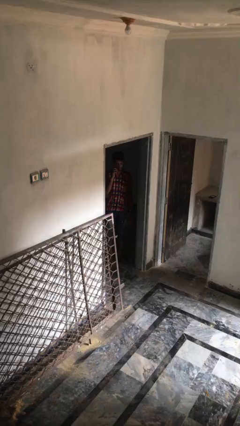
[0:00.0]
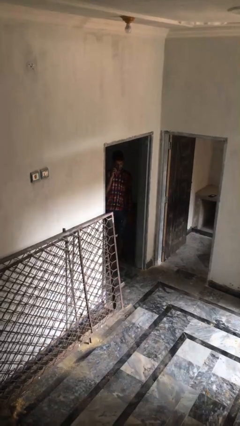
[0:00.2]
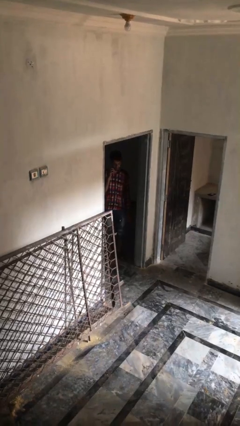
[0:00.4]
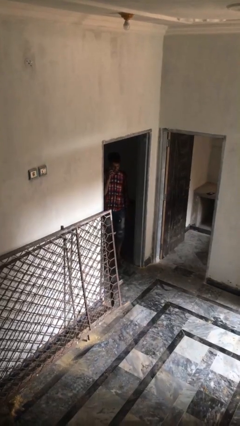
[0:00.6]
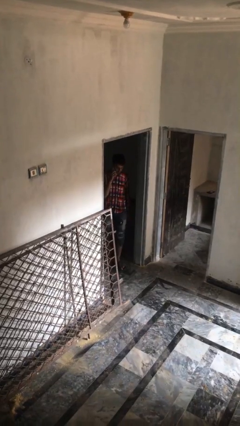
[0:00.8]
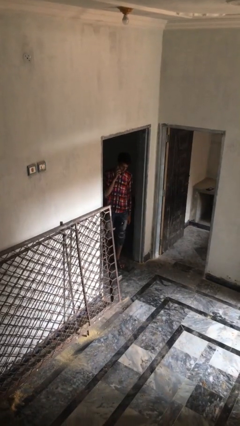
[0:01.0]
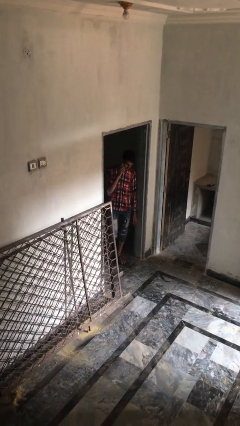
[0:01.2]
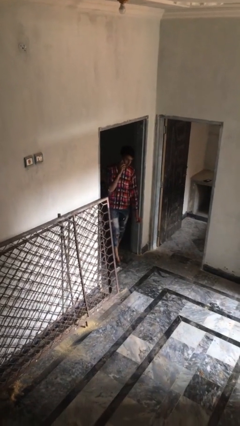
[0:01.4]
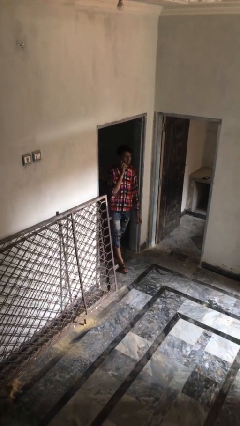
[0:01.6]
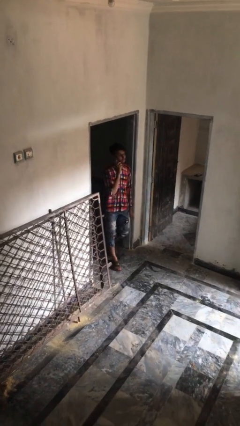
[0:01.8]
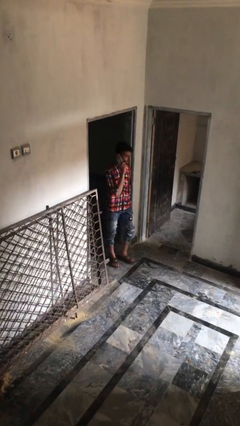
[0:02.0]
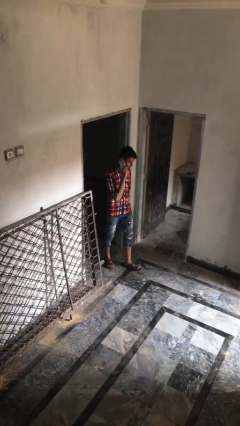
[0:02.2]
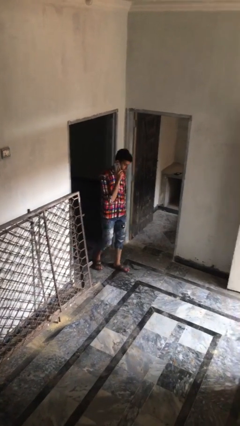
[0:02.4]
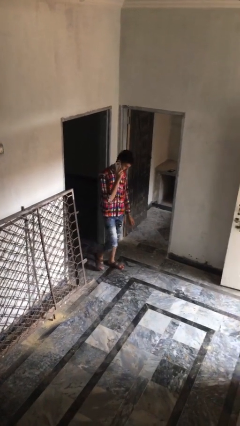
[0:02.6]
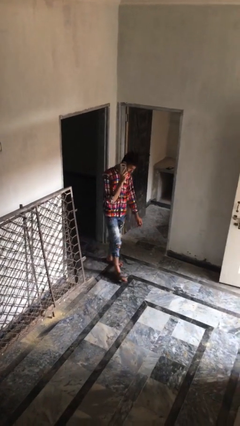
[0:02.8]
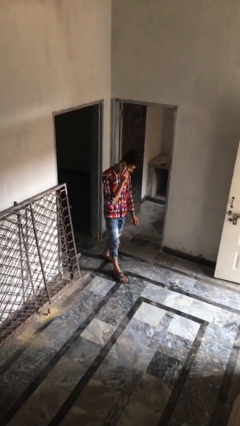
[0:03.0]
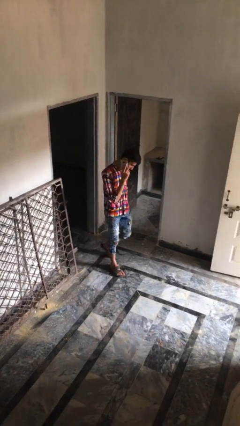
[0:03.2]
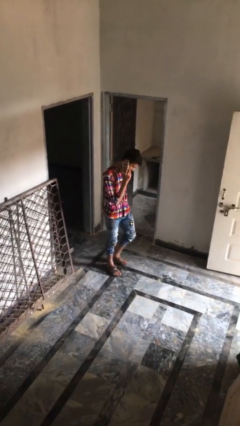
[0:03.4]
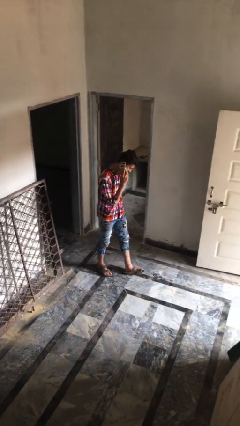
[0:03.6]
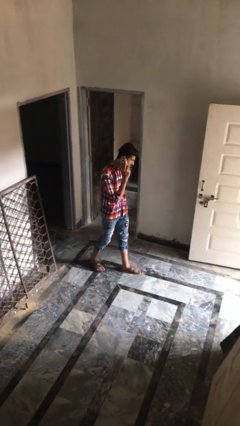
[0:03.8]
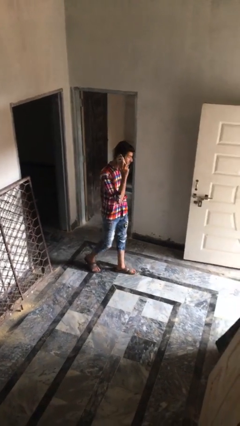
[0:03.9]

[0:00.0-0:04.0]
person enters scene through structure

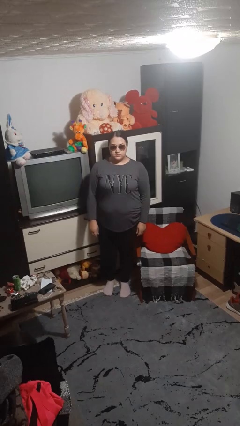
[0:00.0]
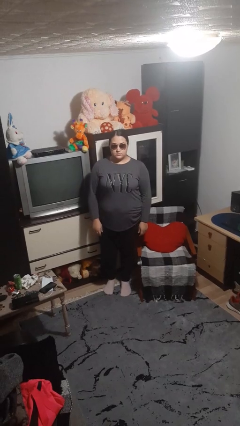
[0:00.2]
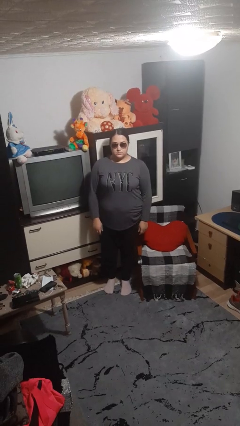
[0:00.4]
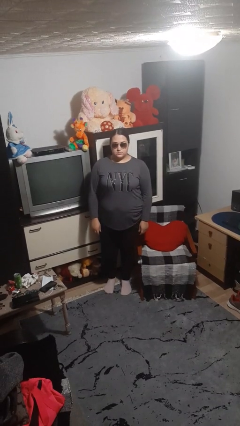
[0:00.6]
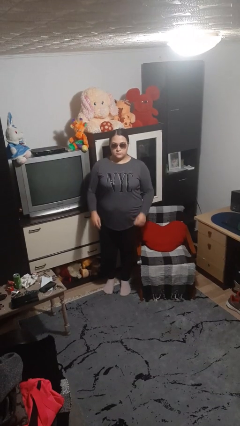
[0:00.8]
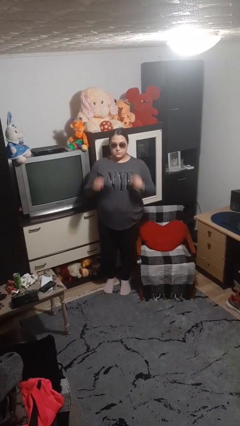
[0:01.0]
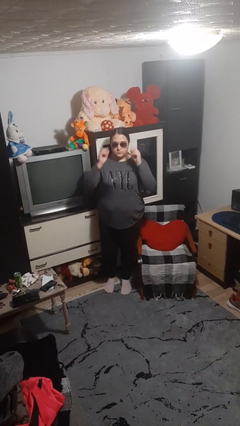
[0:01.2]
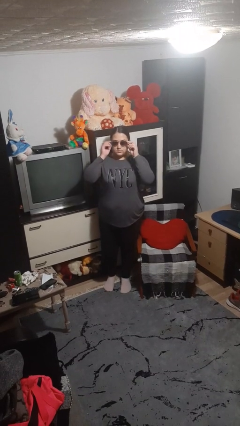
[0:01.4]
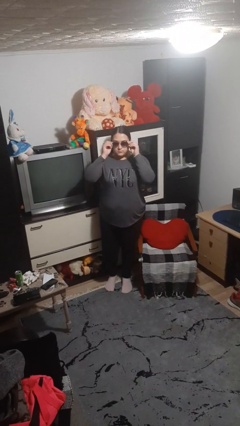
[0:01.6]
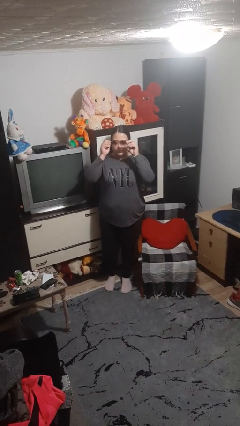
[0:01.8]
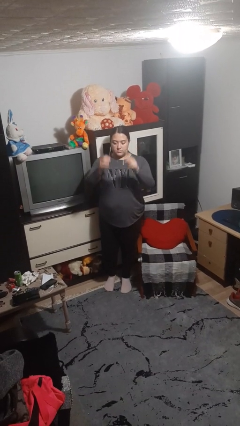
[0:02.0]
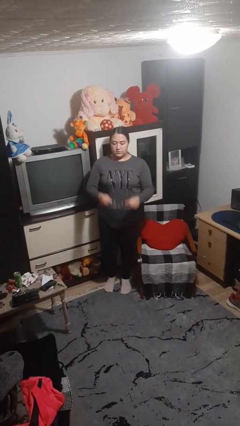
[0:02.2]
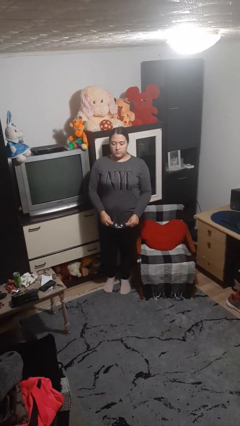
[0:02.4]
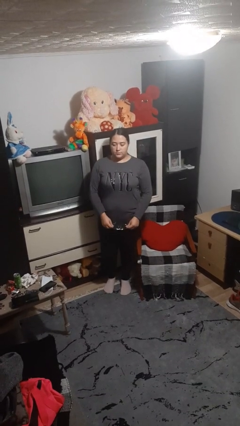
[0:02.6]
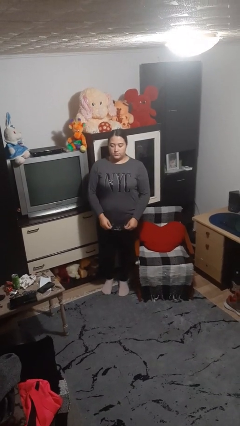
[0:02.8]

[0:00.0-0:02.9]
person takes off sunglasses

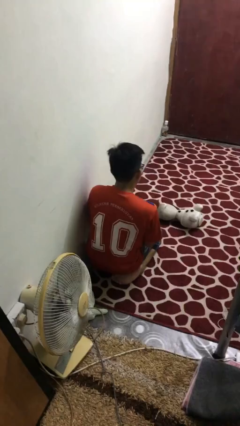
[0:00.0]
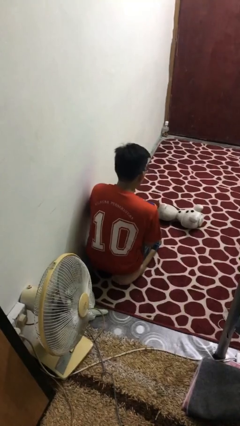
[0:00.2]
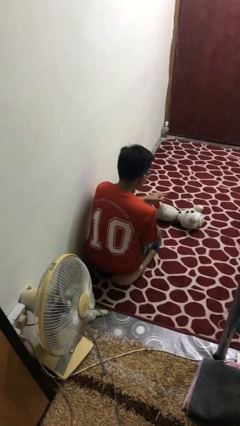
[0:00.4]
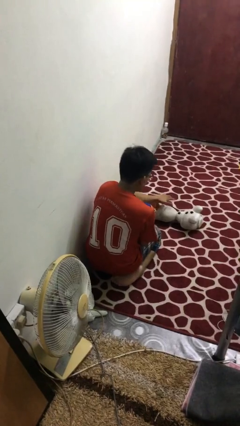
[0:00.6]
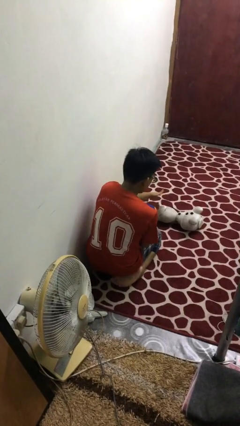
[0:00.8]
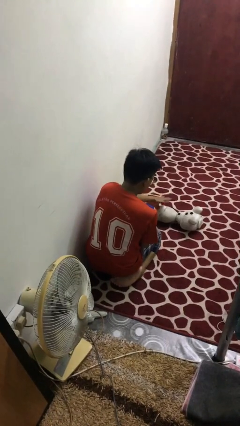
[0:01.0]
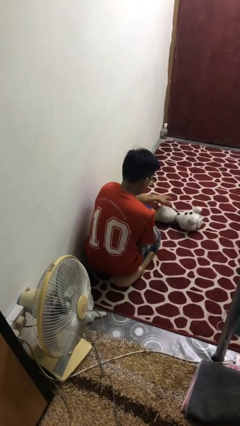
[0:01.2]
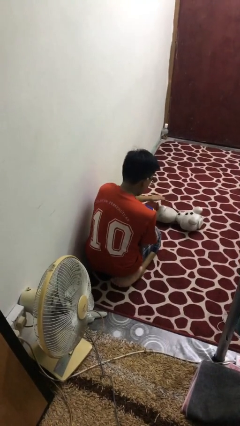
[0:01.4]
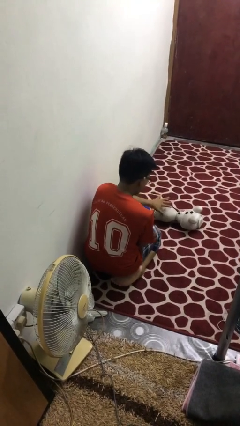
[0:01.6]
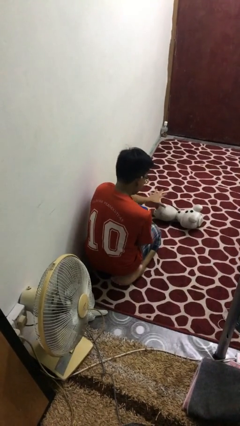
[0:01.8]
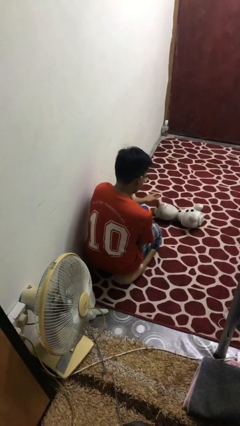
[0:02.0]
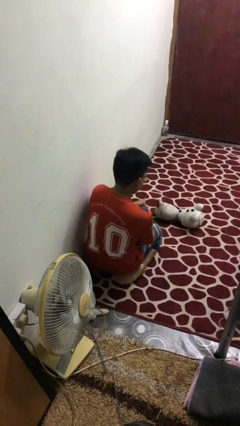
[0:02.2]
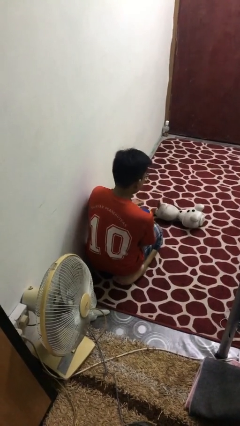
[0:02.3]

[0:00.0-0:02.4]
person waves hand over object

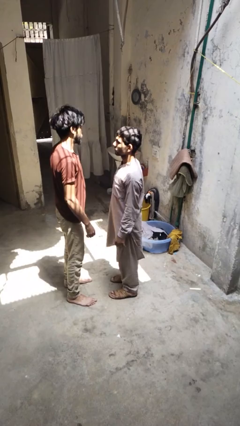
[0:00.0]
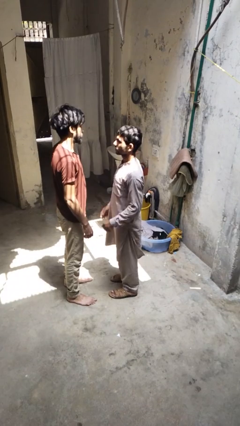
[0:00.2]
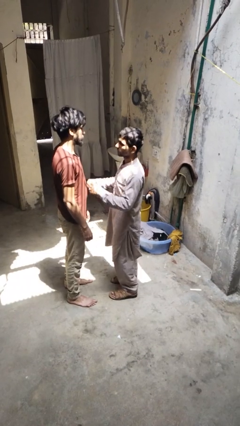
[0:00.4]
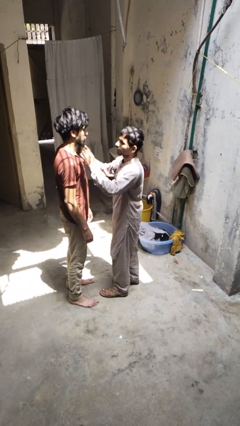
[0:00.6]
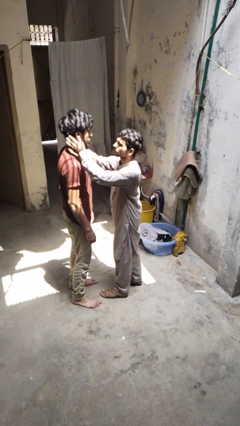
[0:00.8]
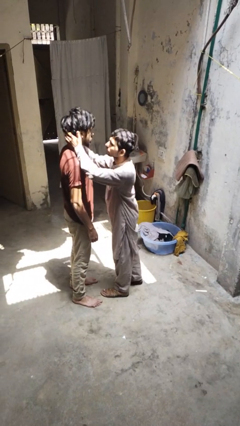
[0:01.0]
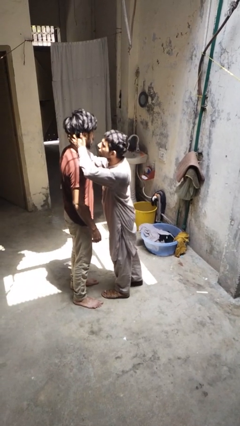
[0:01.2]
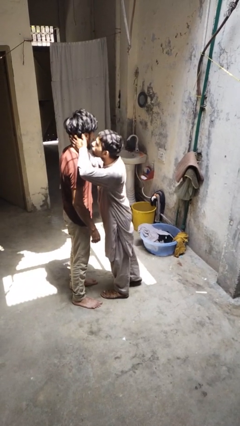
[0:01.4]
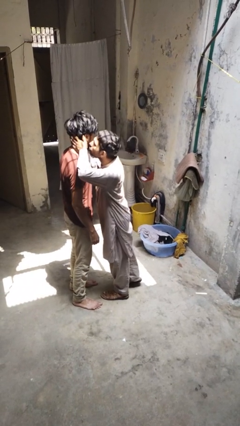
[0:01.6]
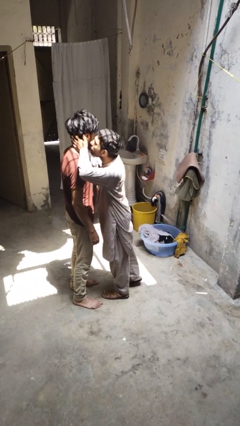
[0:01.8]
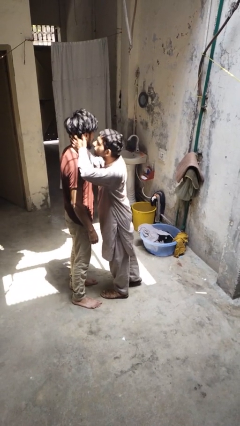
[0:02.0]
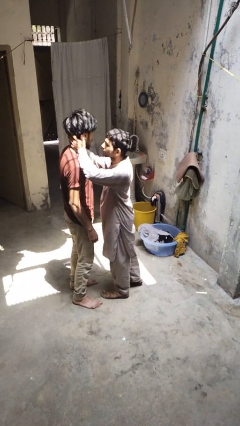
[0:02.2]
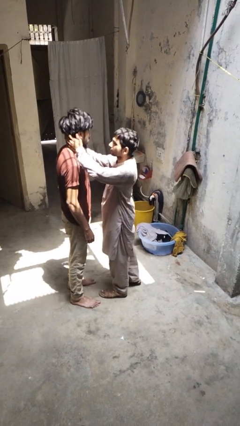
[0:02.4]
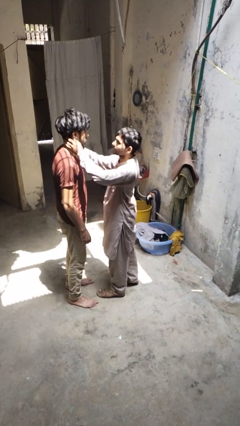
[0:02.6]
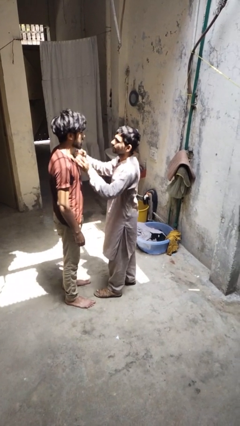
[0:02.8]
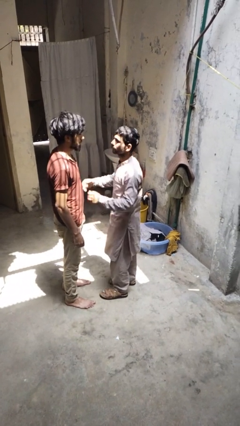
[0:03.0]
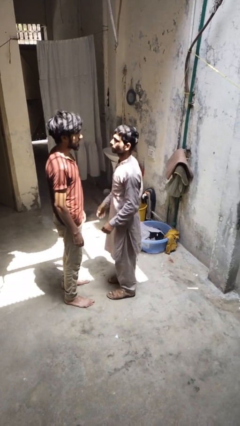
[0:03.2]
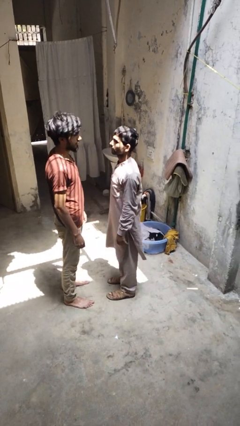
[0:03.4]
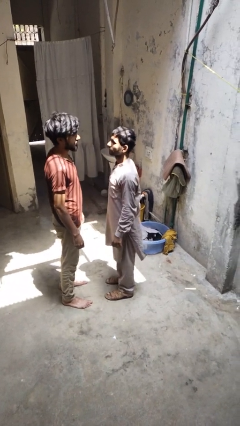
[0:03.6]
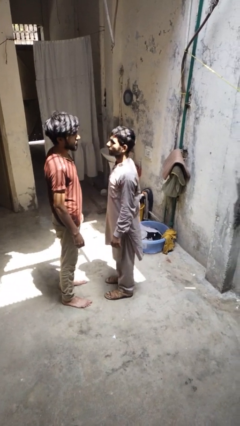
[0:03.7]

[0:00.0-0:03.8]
person kisses cheek of person

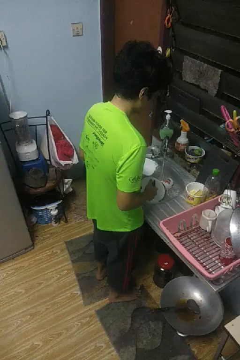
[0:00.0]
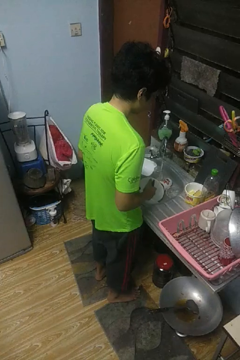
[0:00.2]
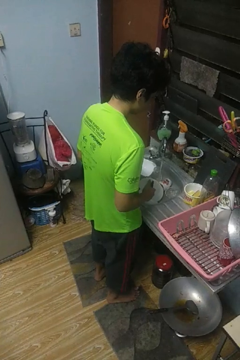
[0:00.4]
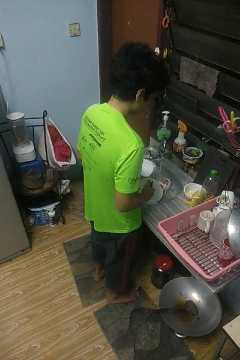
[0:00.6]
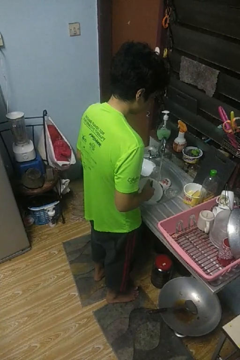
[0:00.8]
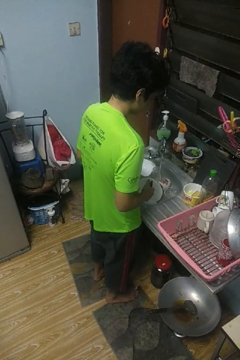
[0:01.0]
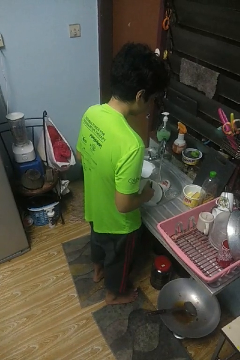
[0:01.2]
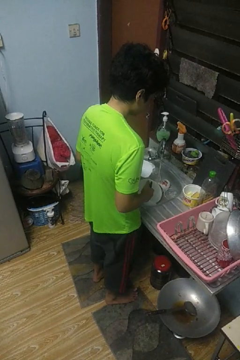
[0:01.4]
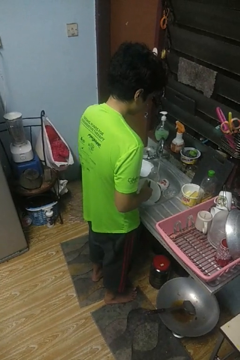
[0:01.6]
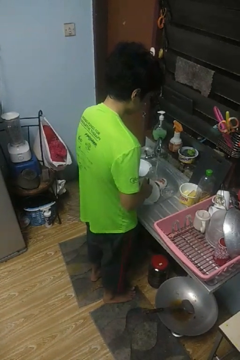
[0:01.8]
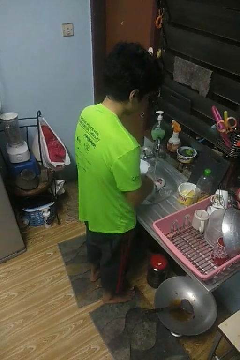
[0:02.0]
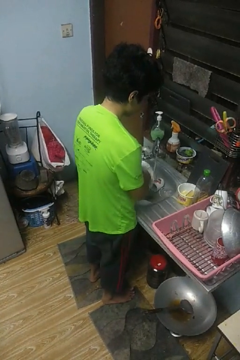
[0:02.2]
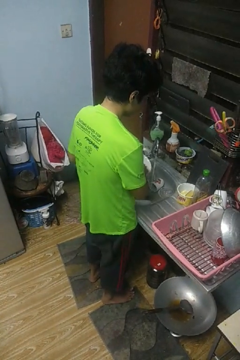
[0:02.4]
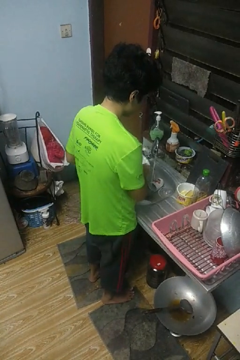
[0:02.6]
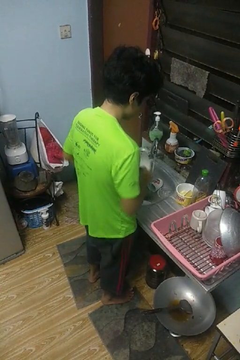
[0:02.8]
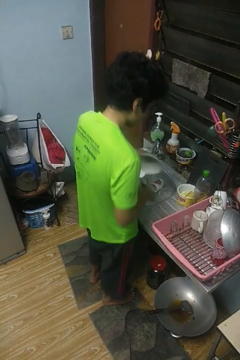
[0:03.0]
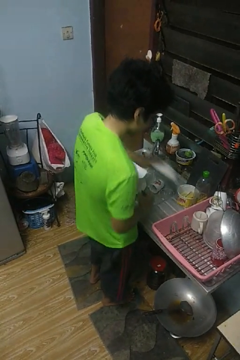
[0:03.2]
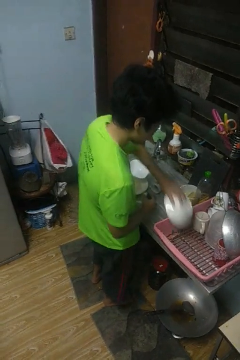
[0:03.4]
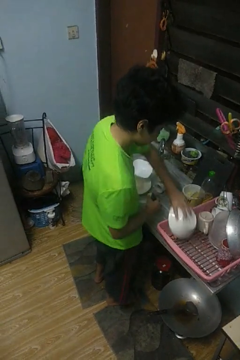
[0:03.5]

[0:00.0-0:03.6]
person washes dish

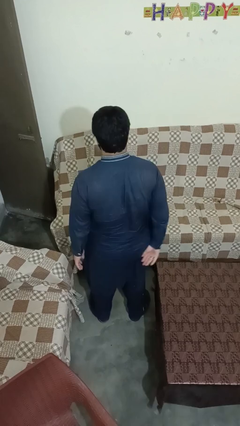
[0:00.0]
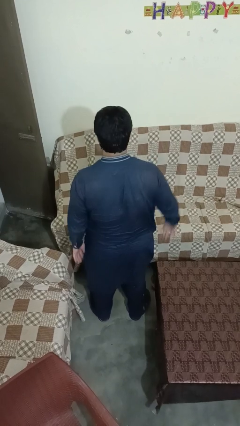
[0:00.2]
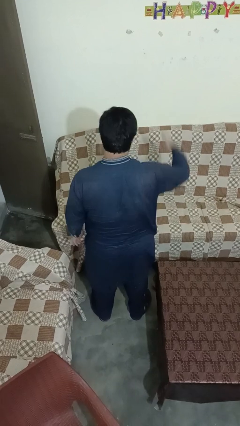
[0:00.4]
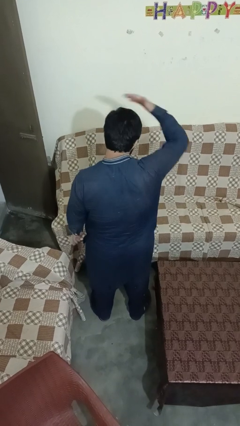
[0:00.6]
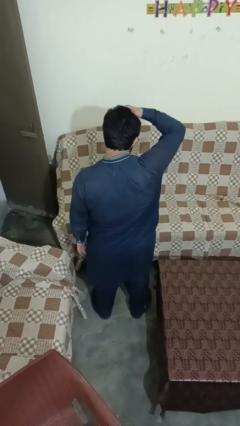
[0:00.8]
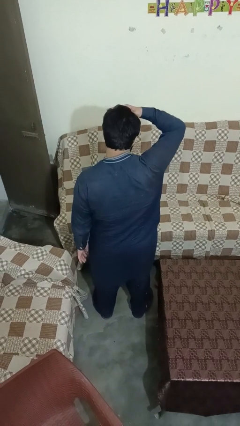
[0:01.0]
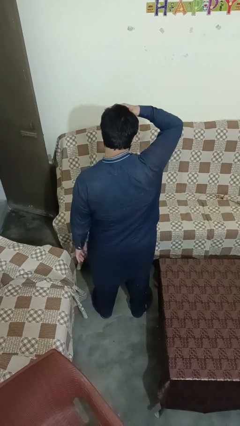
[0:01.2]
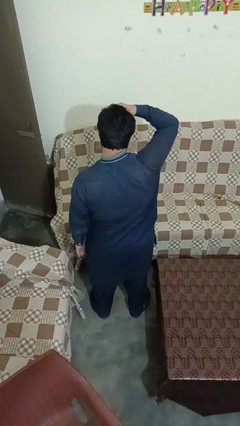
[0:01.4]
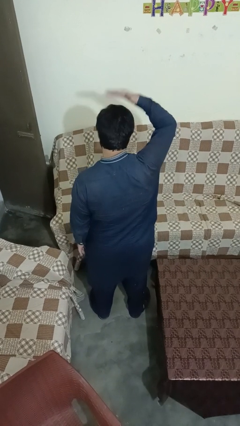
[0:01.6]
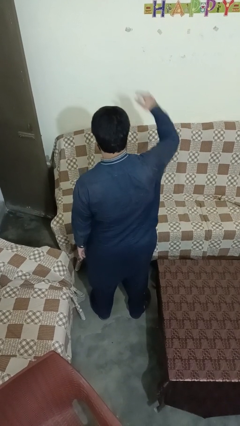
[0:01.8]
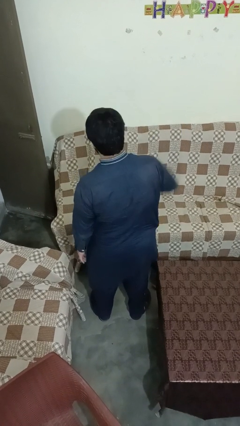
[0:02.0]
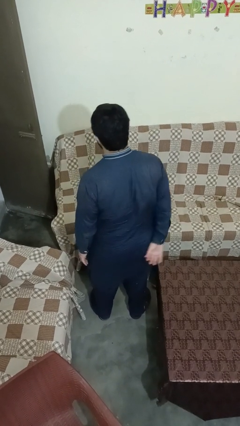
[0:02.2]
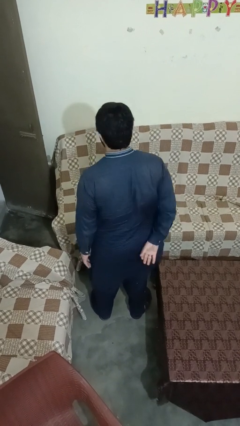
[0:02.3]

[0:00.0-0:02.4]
person pats head
